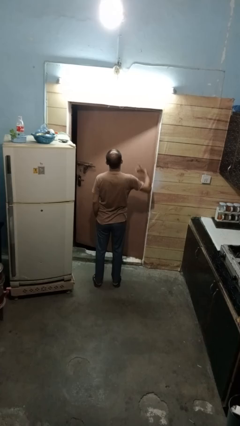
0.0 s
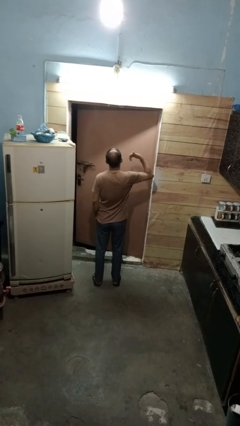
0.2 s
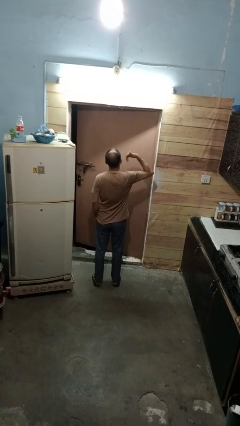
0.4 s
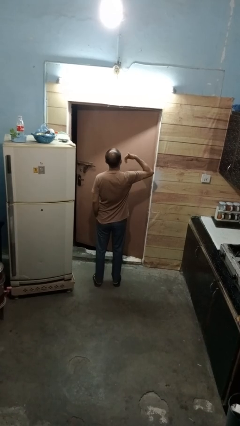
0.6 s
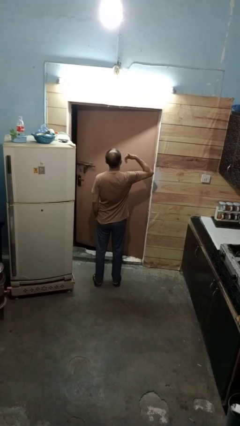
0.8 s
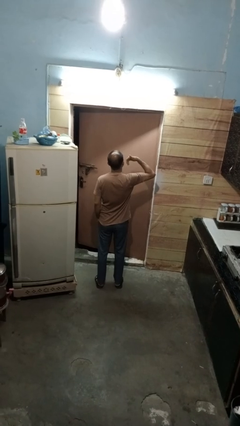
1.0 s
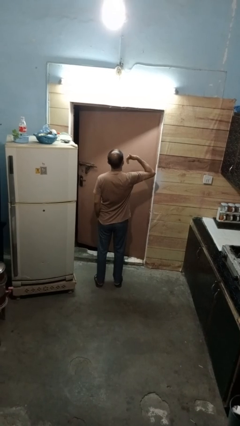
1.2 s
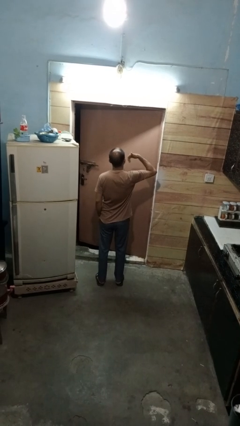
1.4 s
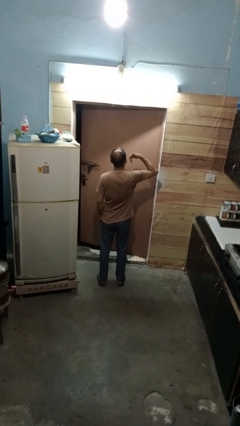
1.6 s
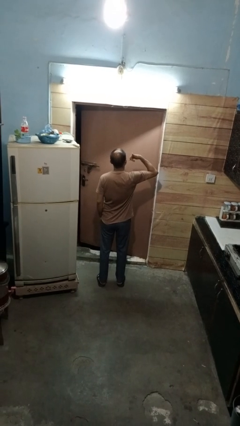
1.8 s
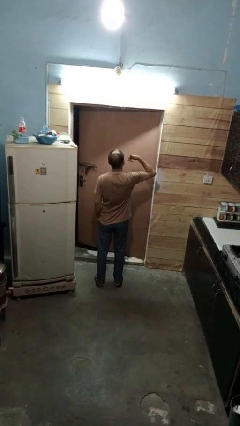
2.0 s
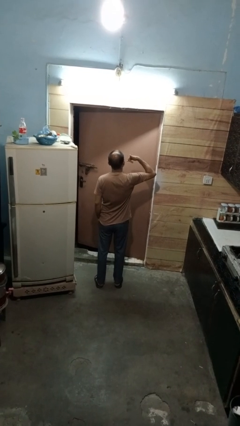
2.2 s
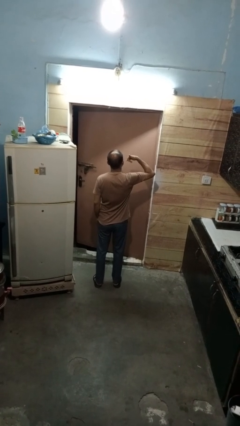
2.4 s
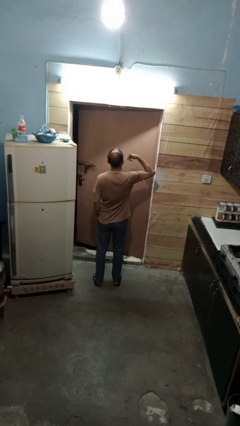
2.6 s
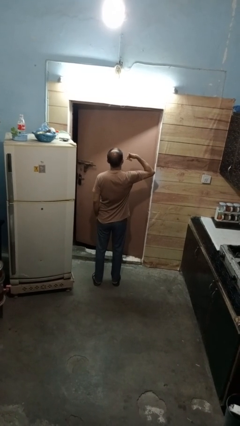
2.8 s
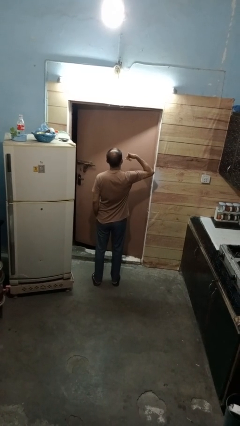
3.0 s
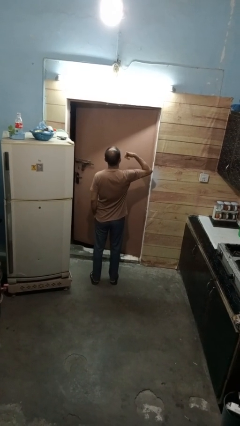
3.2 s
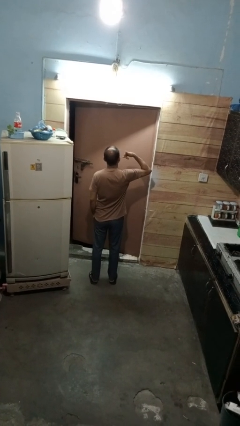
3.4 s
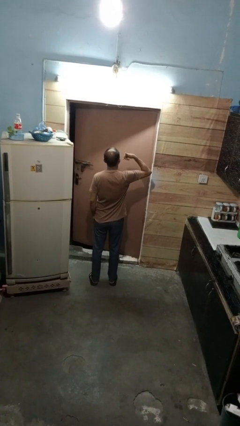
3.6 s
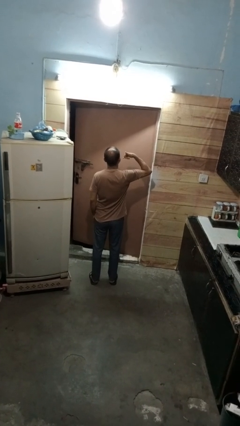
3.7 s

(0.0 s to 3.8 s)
person gestures call me

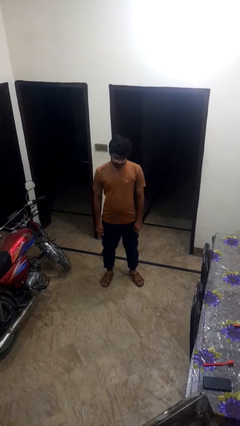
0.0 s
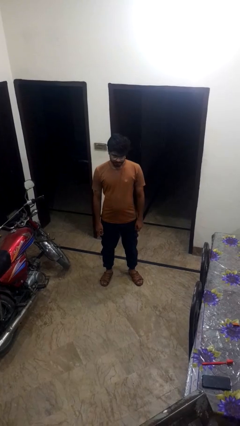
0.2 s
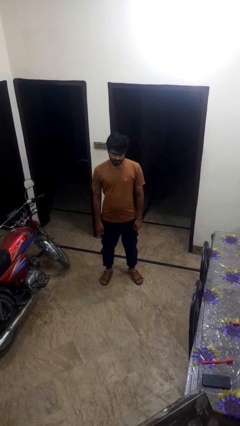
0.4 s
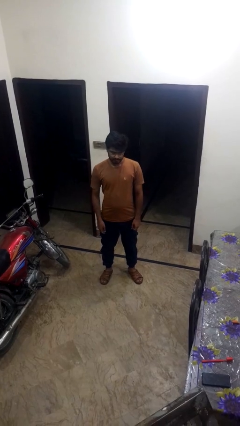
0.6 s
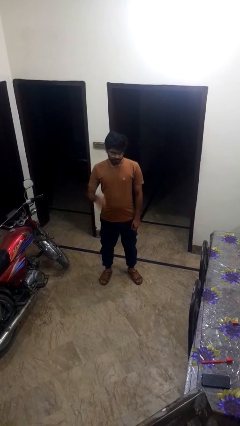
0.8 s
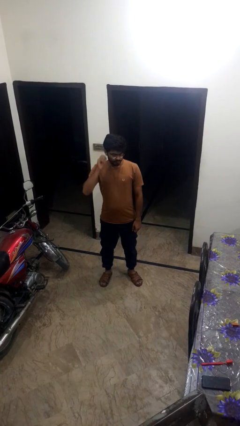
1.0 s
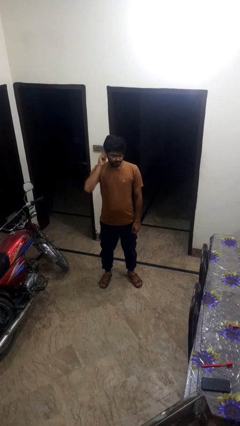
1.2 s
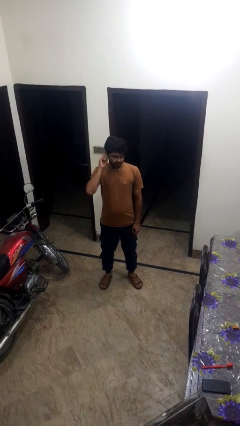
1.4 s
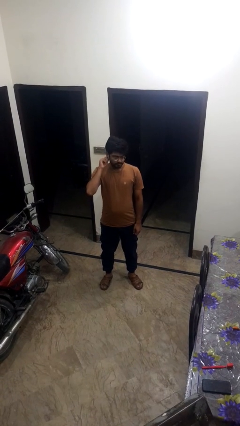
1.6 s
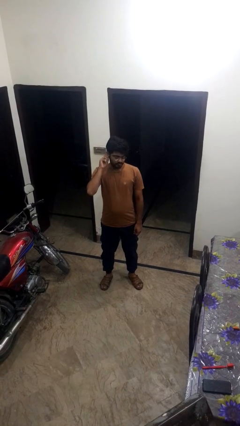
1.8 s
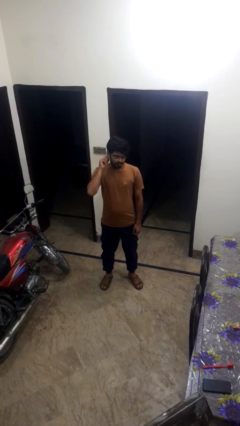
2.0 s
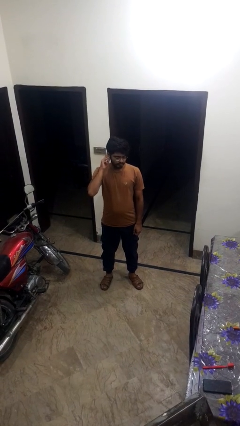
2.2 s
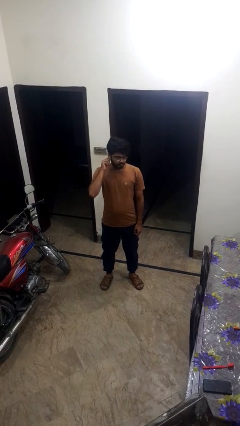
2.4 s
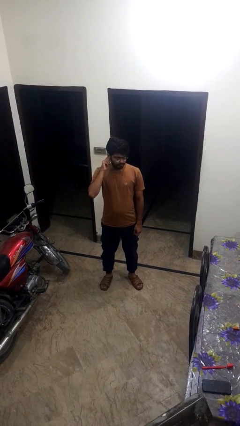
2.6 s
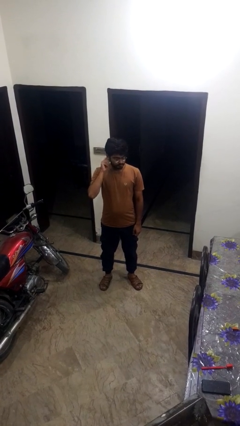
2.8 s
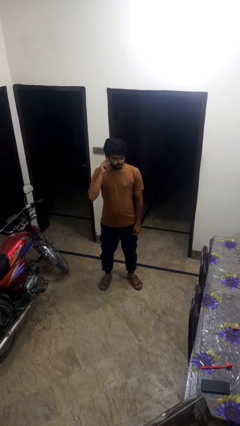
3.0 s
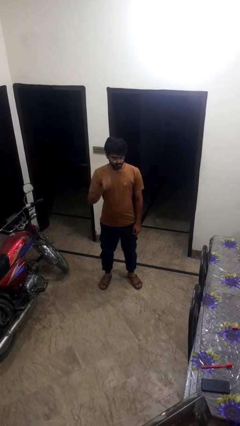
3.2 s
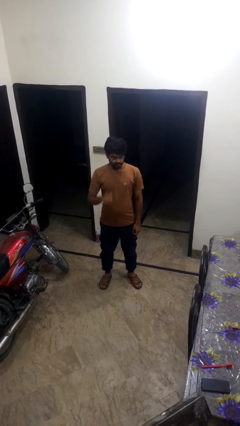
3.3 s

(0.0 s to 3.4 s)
person touches earlobe

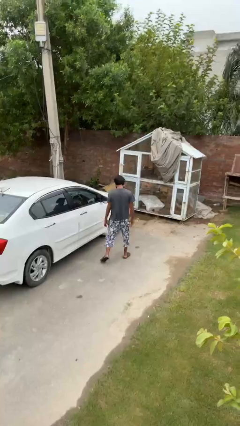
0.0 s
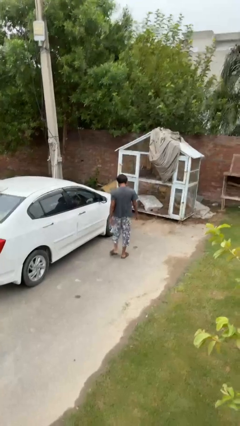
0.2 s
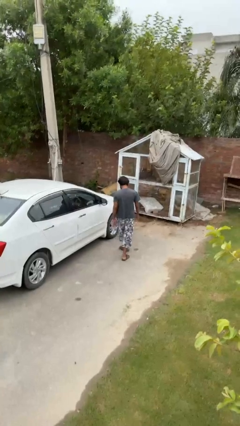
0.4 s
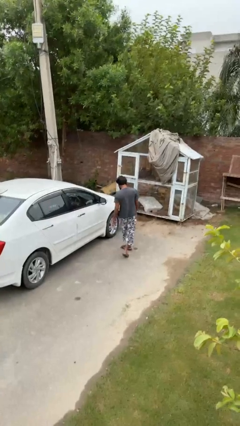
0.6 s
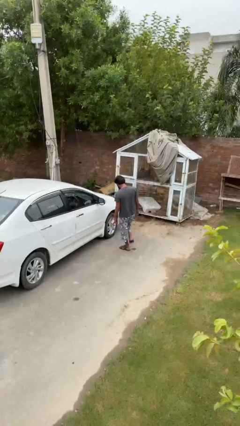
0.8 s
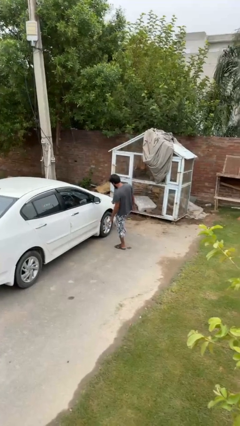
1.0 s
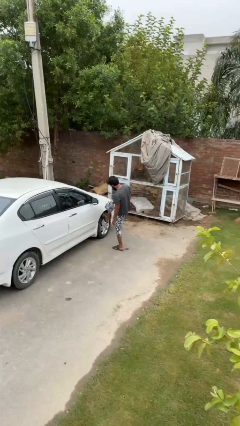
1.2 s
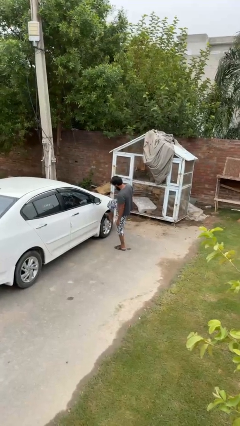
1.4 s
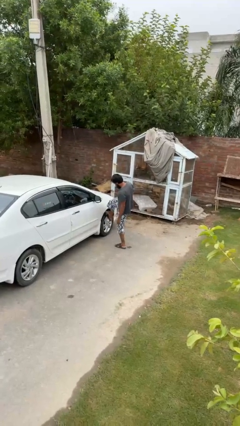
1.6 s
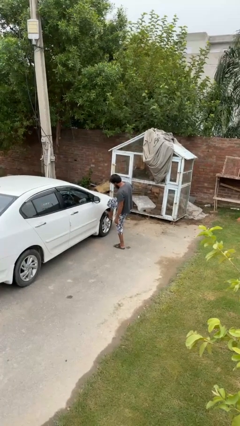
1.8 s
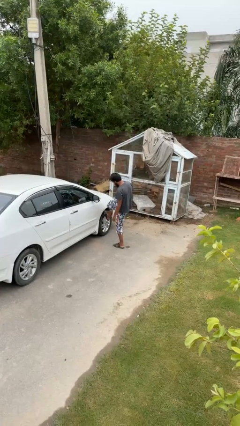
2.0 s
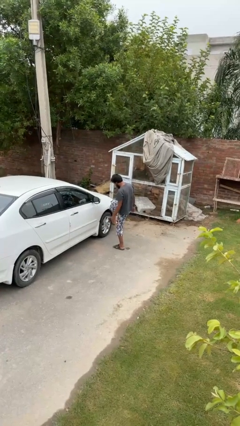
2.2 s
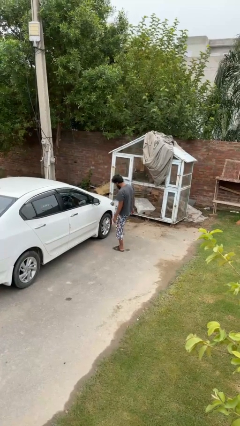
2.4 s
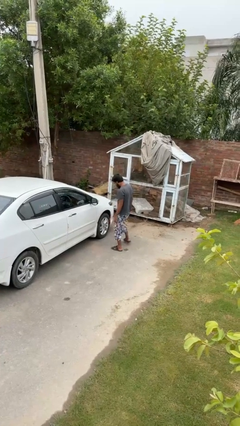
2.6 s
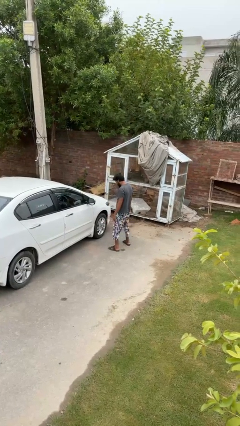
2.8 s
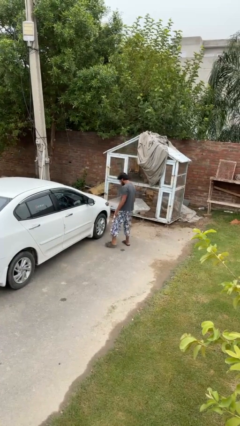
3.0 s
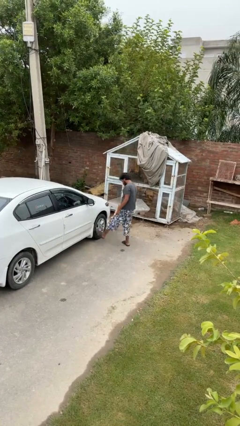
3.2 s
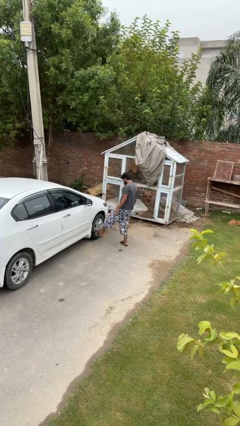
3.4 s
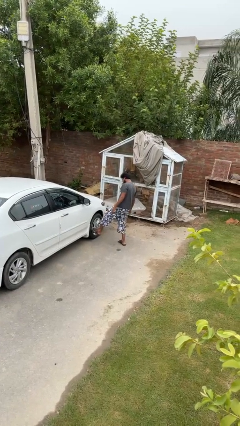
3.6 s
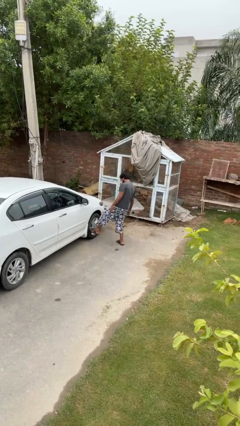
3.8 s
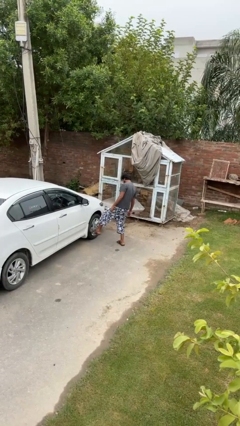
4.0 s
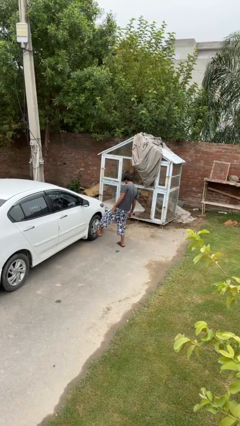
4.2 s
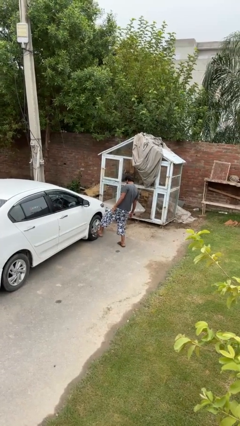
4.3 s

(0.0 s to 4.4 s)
person kicks car tires

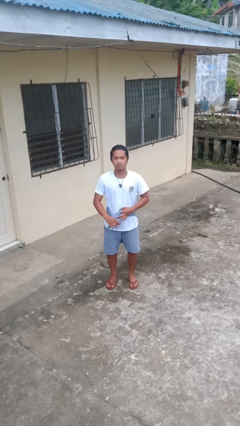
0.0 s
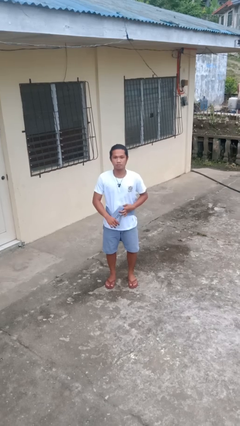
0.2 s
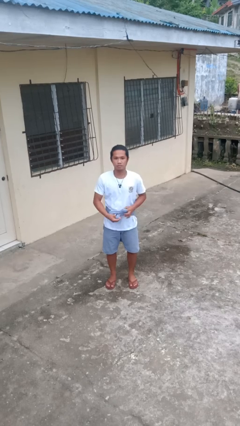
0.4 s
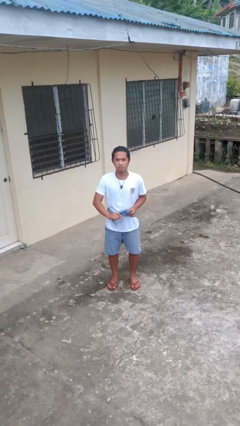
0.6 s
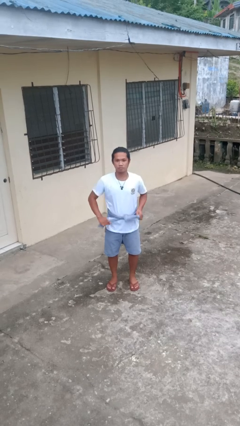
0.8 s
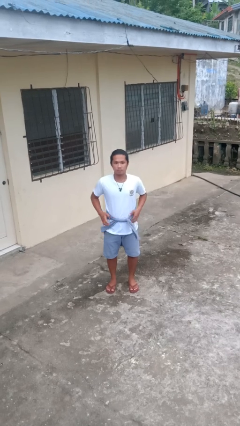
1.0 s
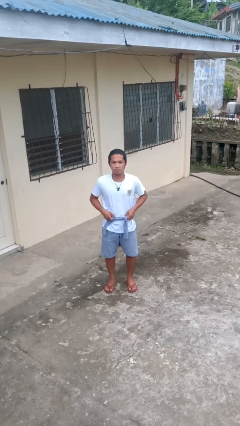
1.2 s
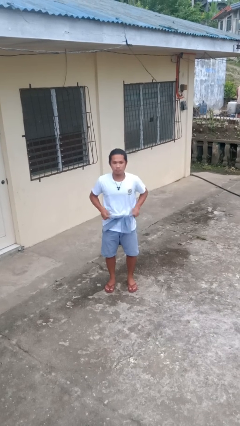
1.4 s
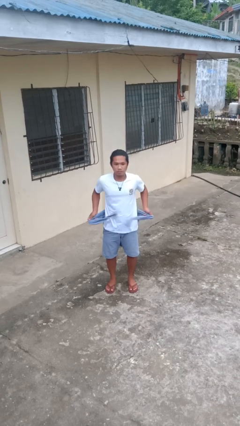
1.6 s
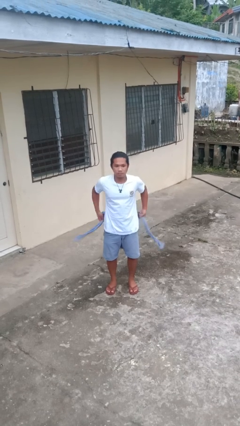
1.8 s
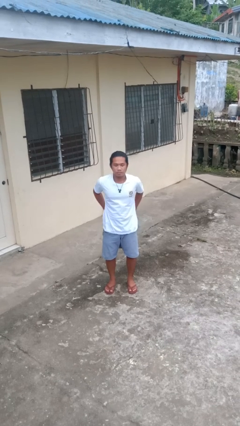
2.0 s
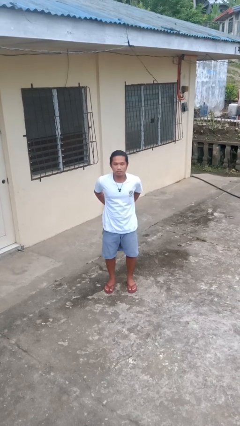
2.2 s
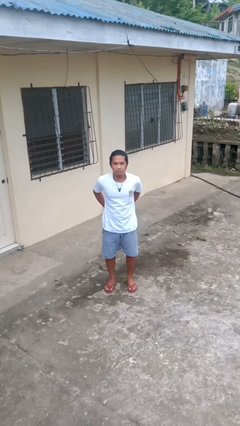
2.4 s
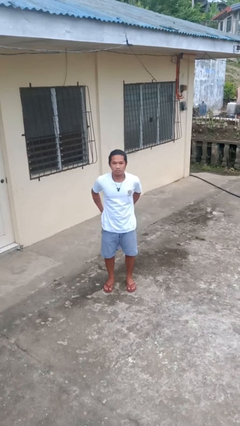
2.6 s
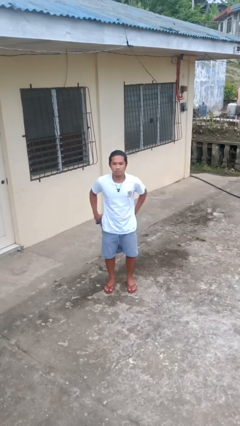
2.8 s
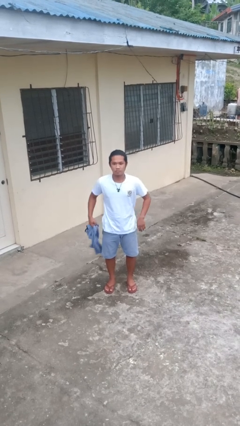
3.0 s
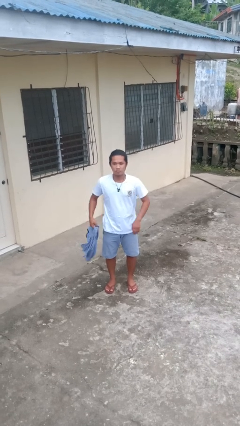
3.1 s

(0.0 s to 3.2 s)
person unties jacket around waist

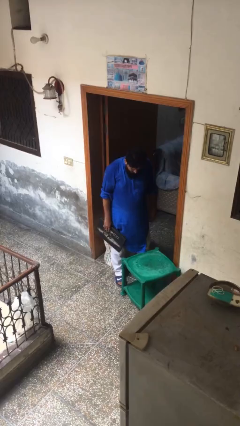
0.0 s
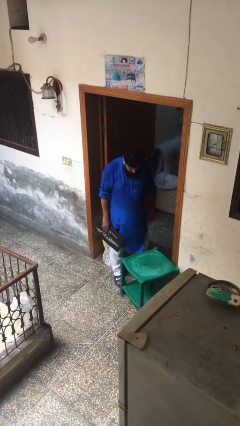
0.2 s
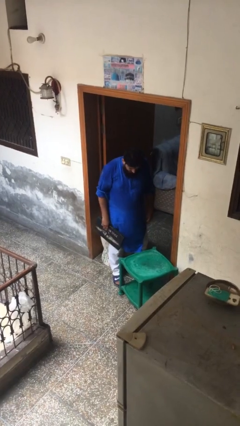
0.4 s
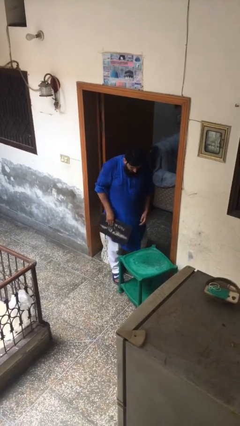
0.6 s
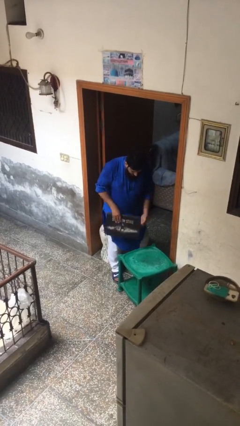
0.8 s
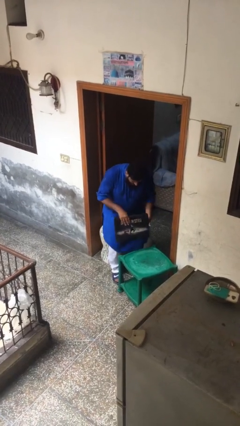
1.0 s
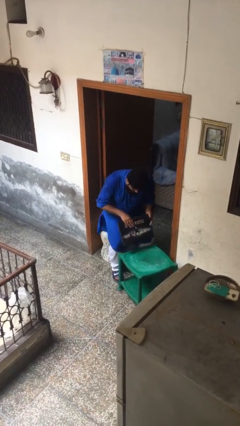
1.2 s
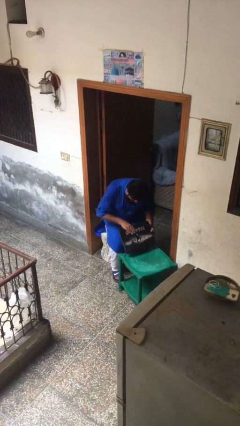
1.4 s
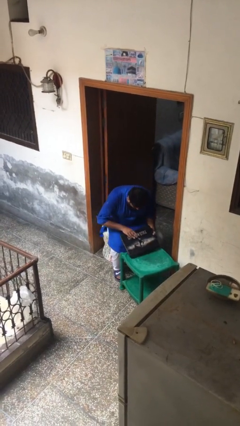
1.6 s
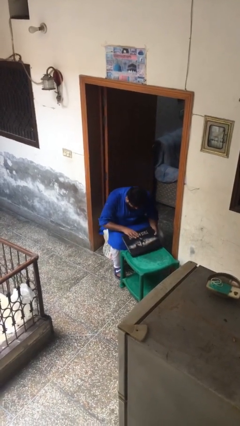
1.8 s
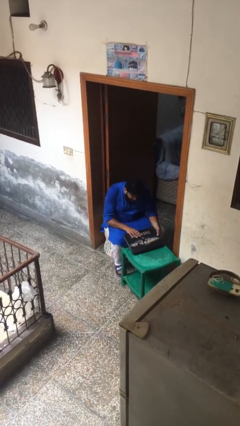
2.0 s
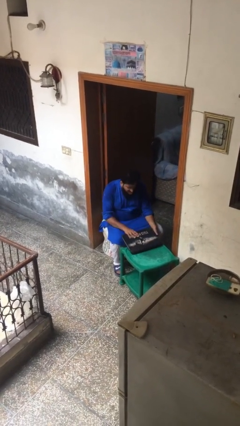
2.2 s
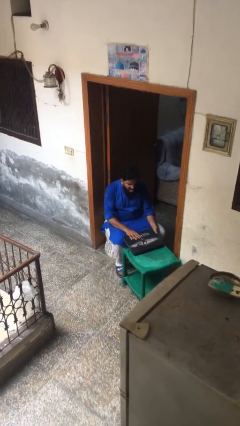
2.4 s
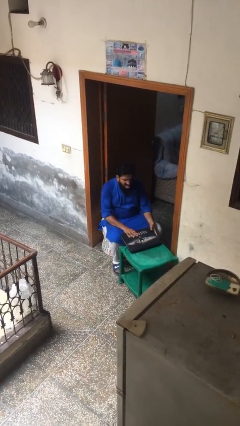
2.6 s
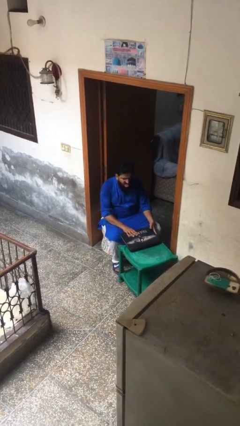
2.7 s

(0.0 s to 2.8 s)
person sits down
